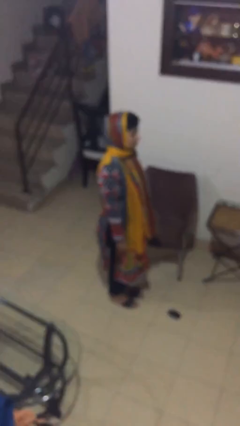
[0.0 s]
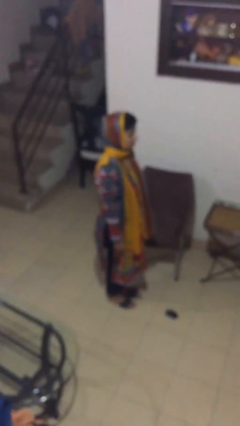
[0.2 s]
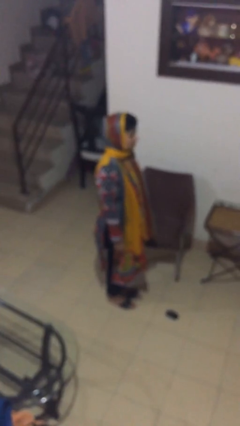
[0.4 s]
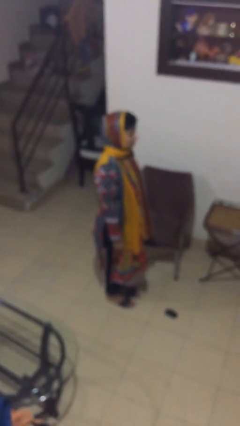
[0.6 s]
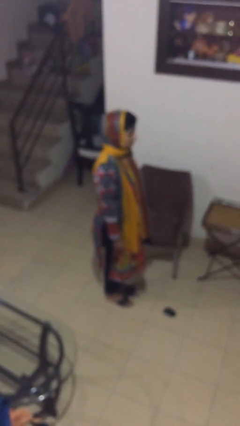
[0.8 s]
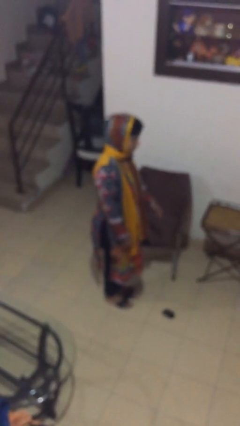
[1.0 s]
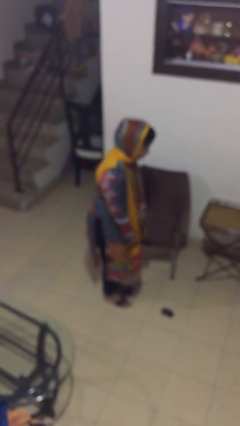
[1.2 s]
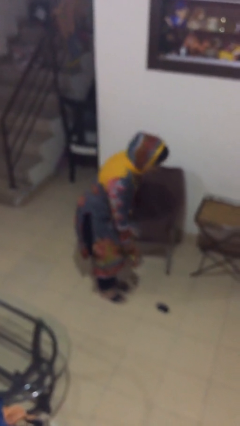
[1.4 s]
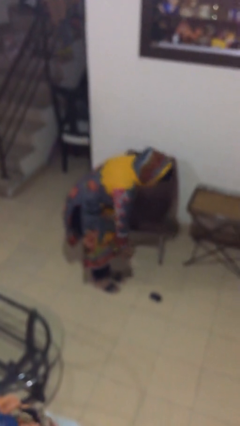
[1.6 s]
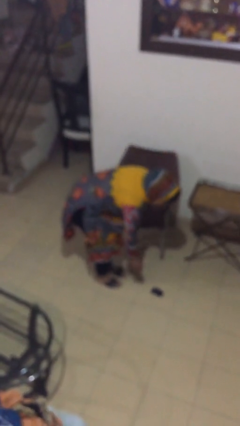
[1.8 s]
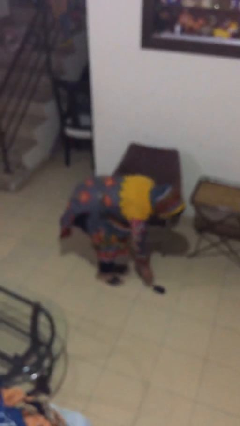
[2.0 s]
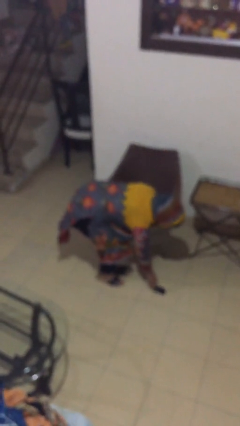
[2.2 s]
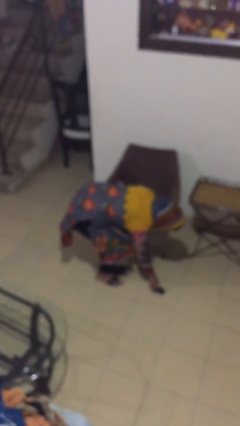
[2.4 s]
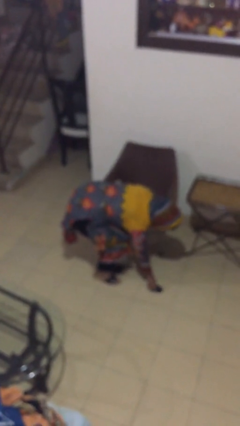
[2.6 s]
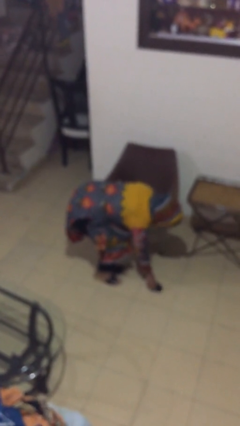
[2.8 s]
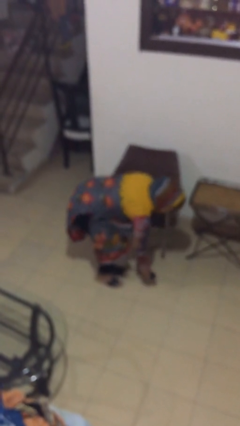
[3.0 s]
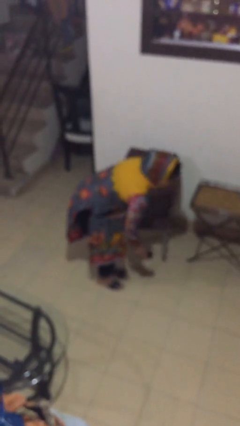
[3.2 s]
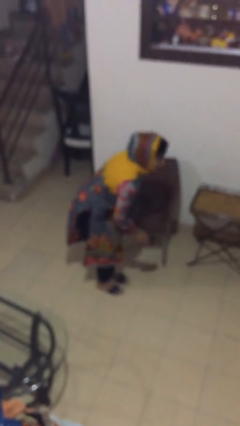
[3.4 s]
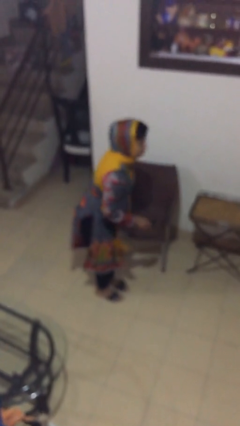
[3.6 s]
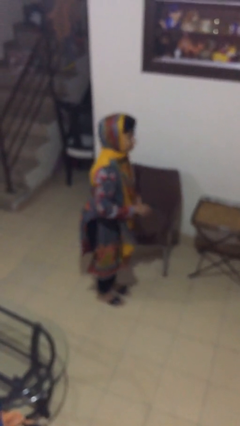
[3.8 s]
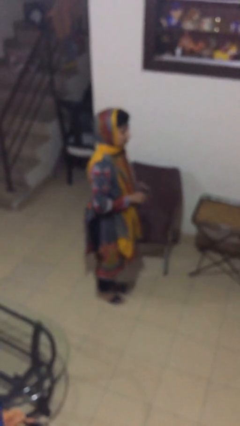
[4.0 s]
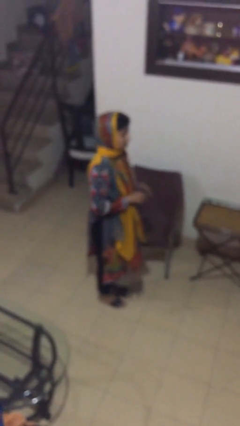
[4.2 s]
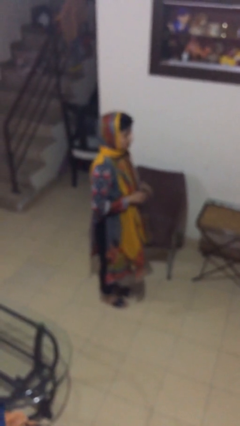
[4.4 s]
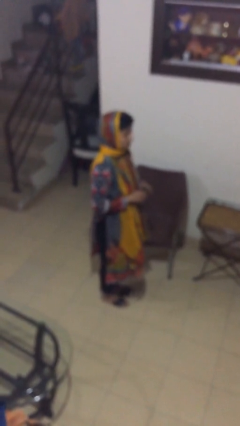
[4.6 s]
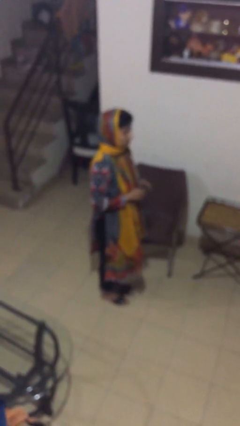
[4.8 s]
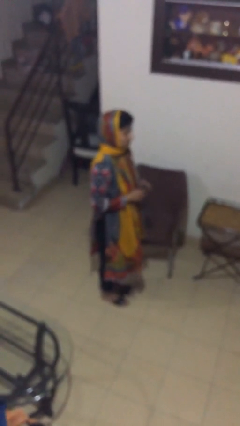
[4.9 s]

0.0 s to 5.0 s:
person picks up object from floor

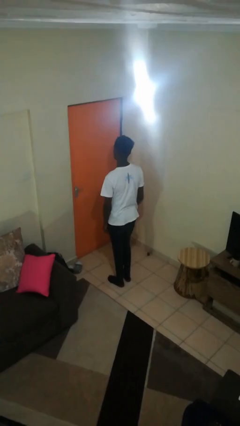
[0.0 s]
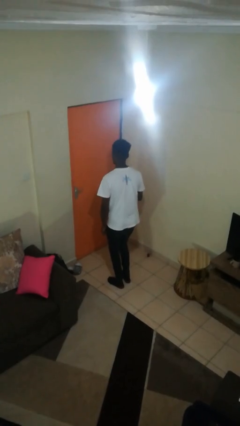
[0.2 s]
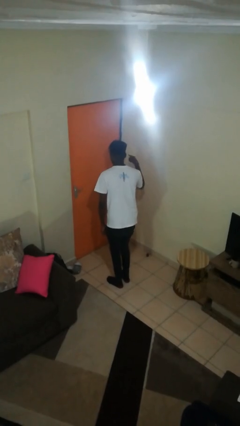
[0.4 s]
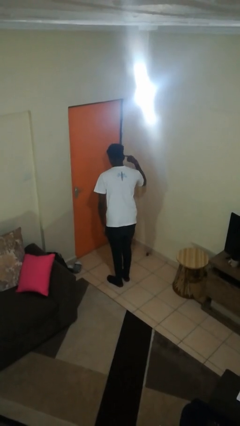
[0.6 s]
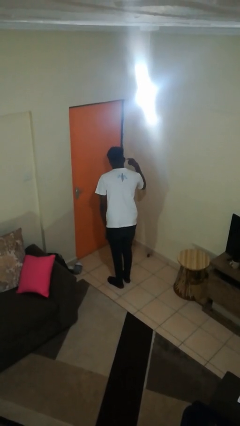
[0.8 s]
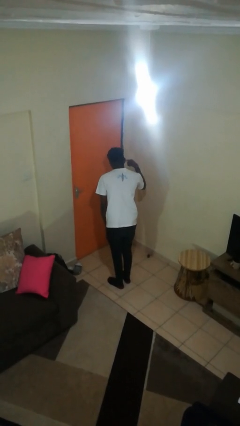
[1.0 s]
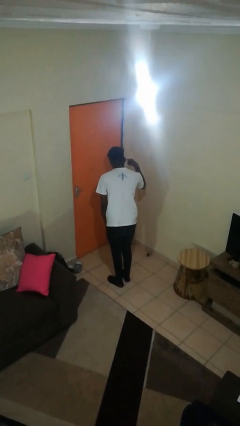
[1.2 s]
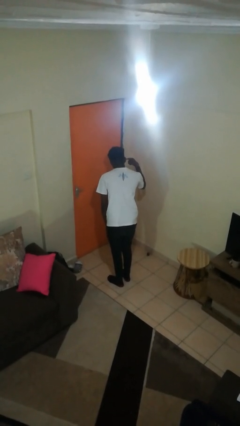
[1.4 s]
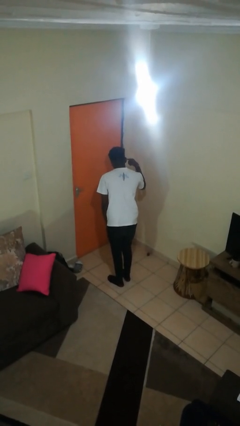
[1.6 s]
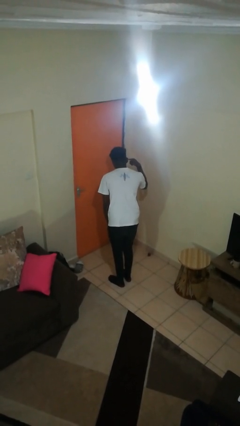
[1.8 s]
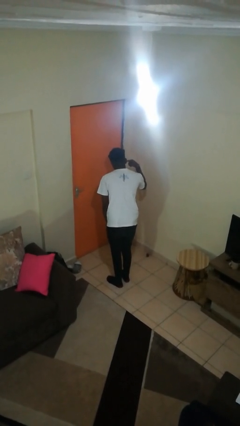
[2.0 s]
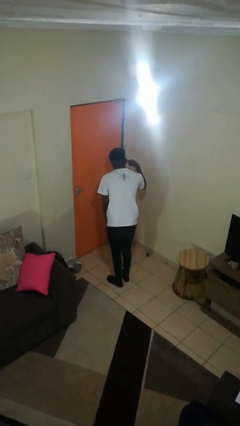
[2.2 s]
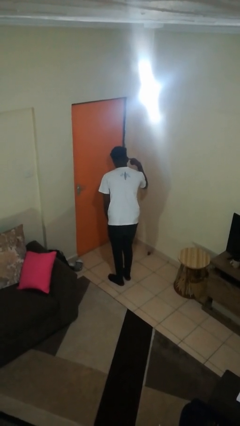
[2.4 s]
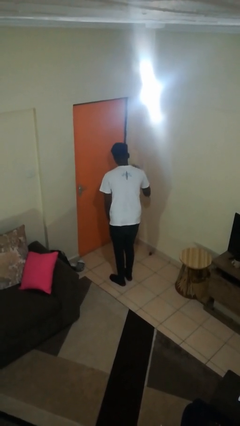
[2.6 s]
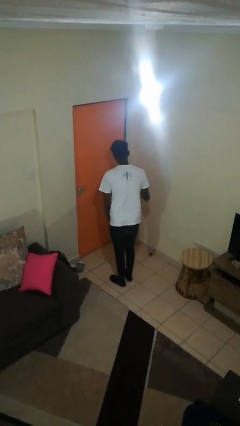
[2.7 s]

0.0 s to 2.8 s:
person gestures listen closely

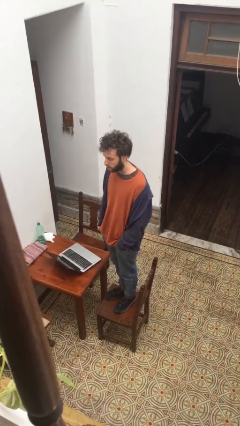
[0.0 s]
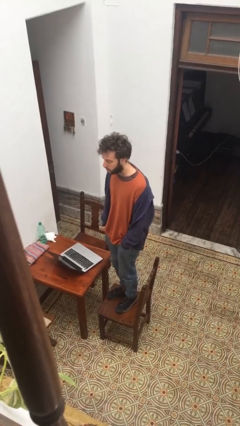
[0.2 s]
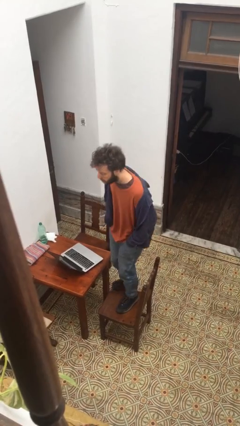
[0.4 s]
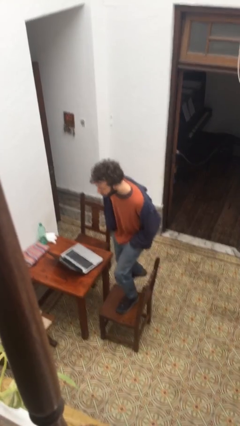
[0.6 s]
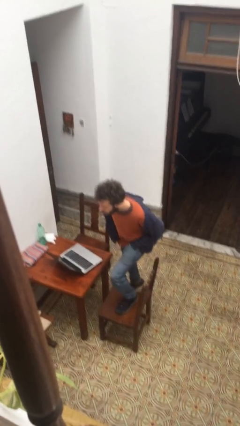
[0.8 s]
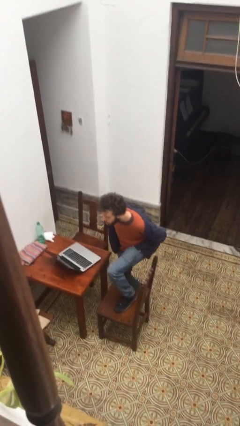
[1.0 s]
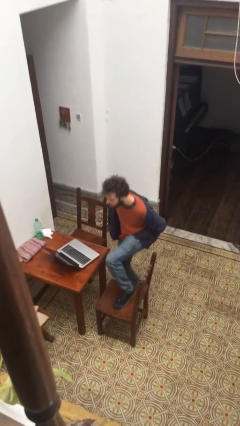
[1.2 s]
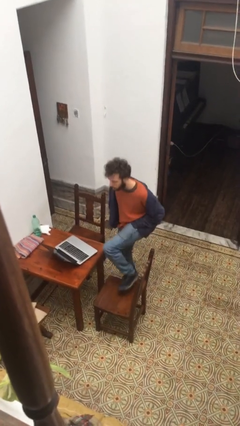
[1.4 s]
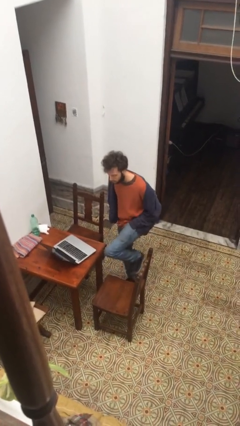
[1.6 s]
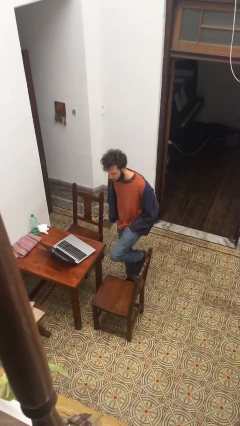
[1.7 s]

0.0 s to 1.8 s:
person climbs off chair

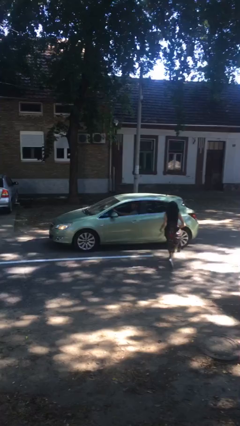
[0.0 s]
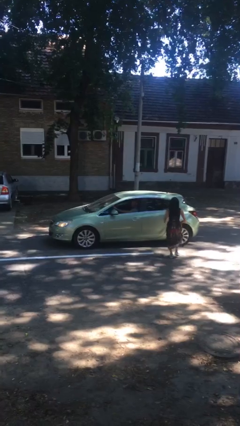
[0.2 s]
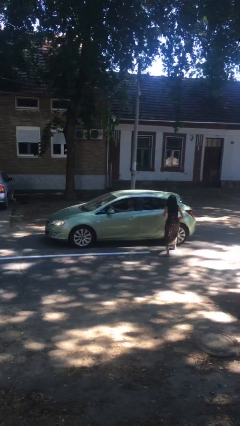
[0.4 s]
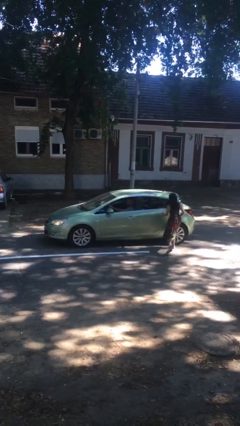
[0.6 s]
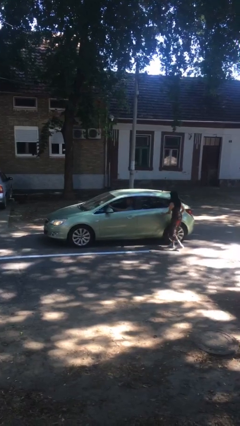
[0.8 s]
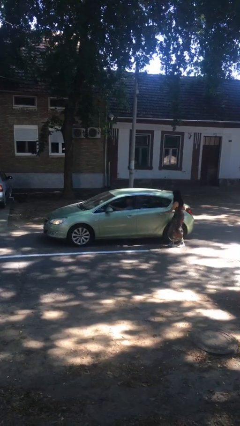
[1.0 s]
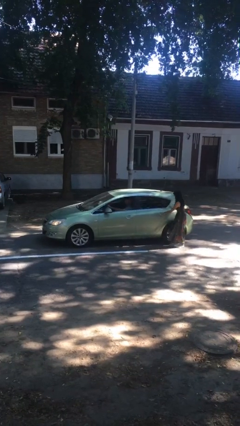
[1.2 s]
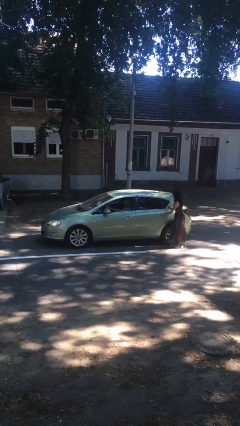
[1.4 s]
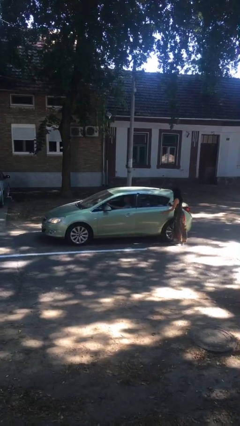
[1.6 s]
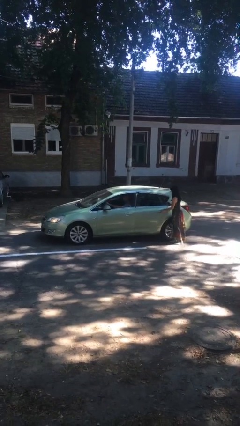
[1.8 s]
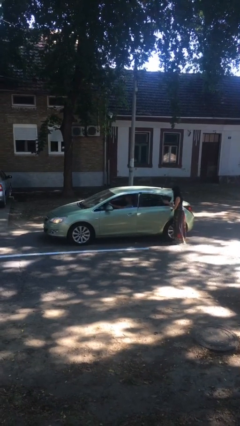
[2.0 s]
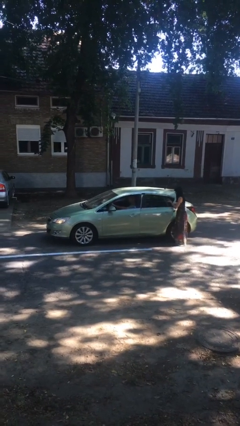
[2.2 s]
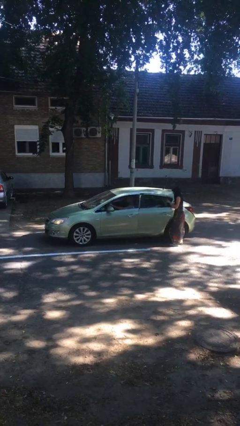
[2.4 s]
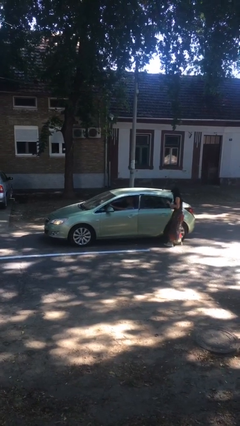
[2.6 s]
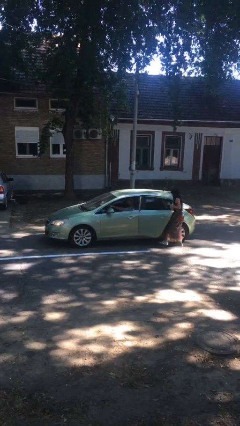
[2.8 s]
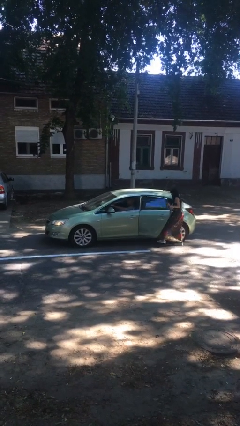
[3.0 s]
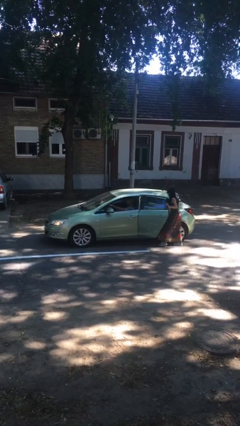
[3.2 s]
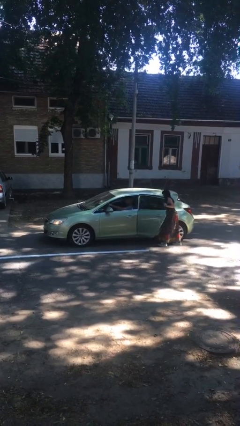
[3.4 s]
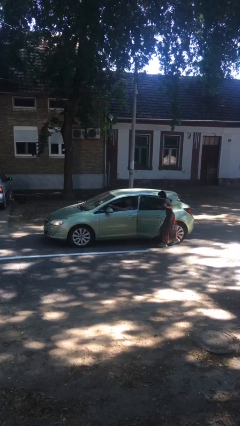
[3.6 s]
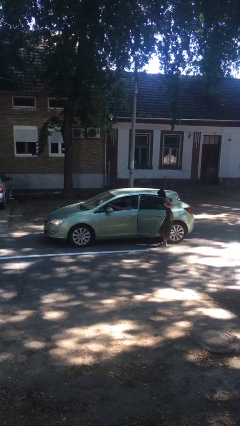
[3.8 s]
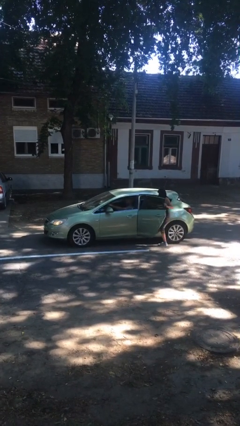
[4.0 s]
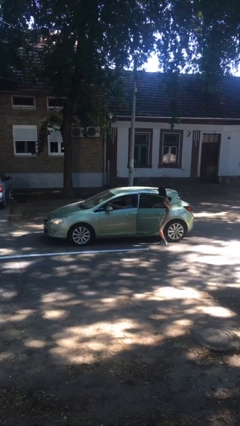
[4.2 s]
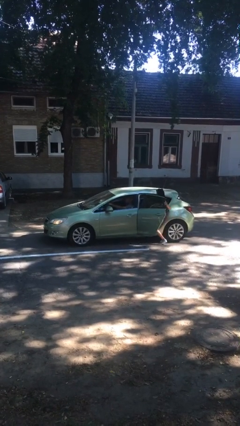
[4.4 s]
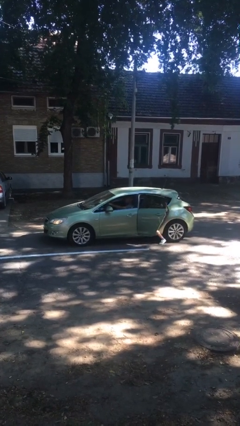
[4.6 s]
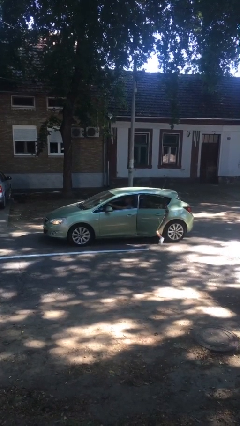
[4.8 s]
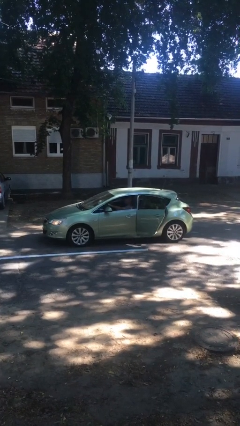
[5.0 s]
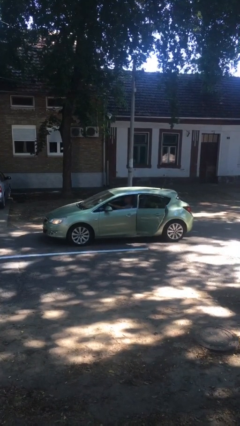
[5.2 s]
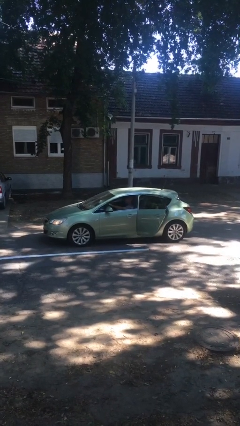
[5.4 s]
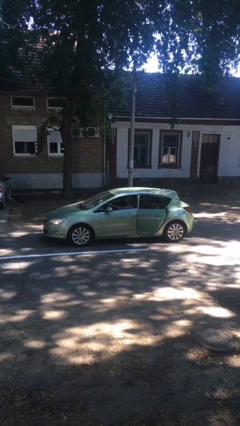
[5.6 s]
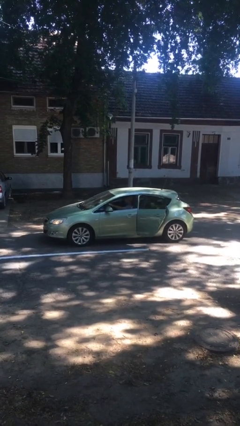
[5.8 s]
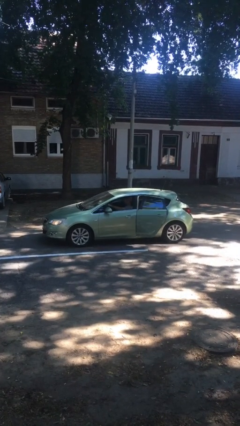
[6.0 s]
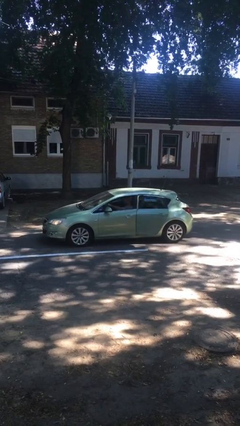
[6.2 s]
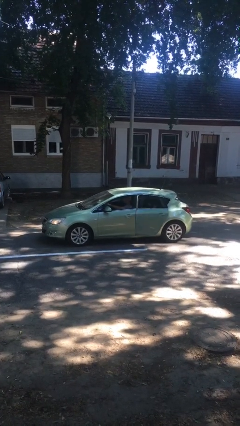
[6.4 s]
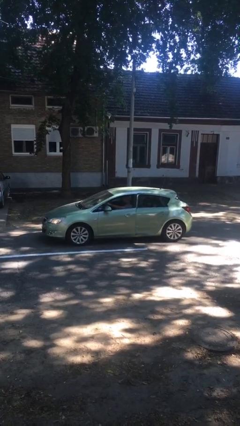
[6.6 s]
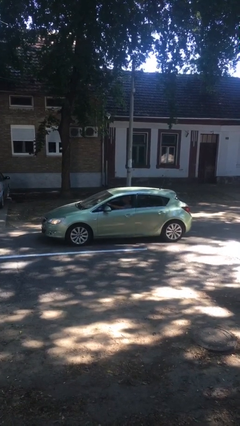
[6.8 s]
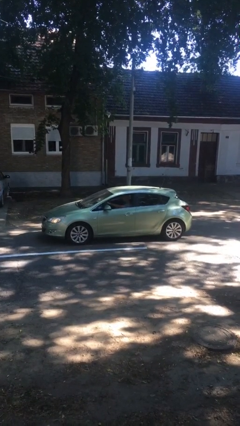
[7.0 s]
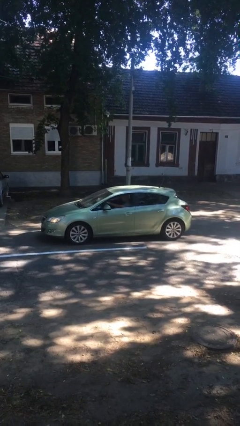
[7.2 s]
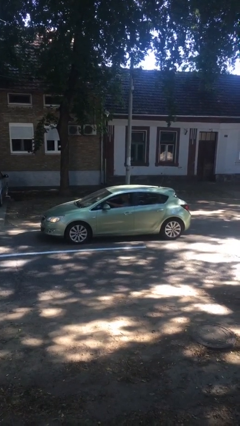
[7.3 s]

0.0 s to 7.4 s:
car picks up person

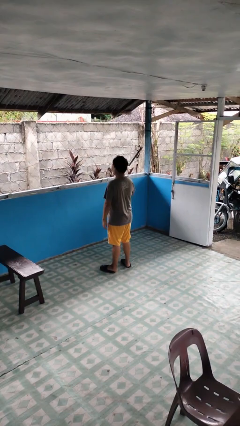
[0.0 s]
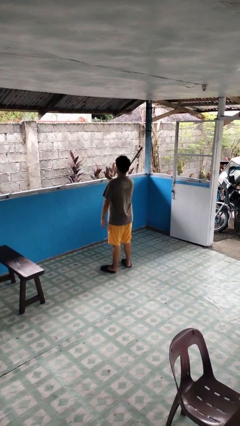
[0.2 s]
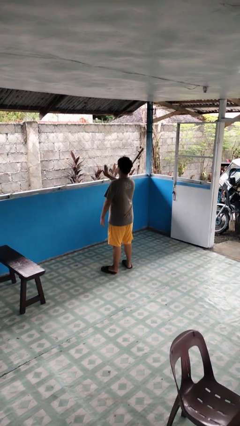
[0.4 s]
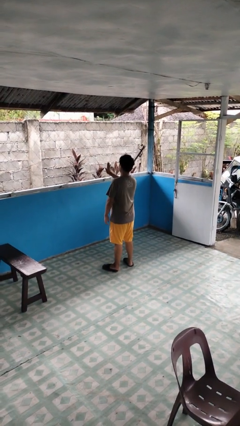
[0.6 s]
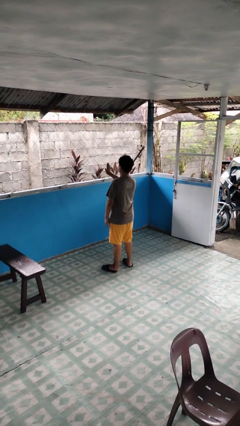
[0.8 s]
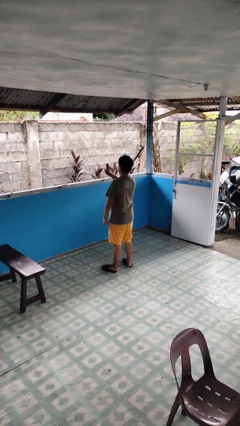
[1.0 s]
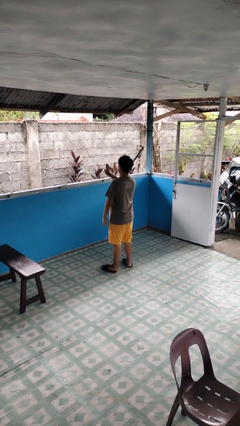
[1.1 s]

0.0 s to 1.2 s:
person gestures stop
